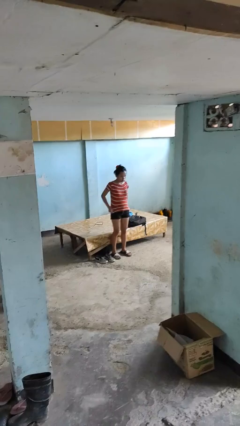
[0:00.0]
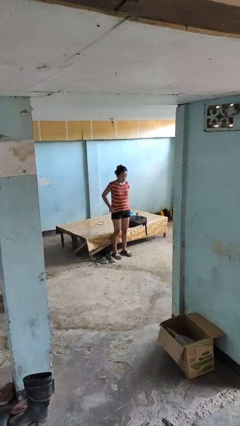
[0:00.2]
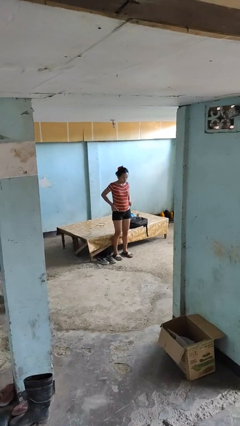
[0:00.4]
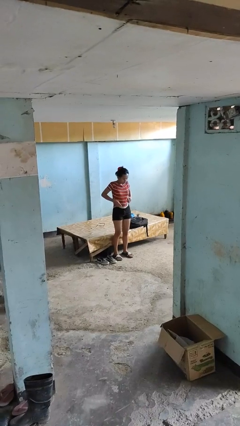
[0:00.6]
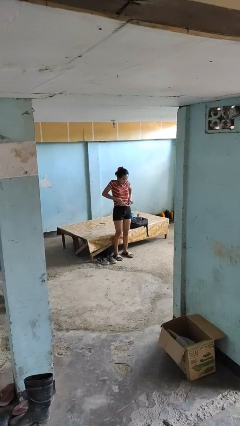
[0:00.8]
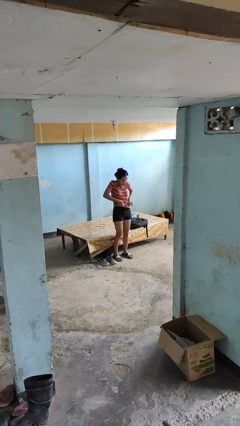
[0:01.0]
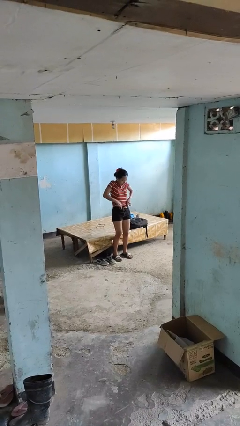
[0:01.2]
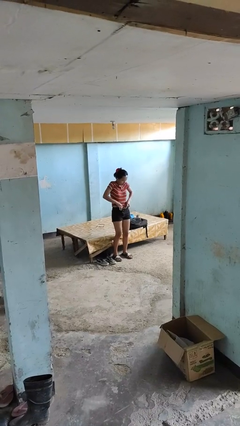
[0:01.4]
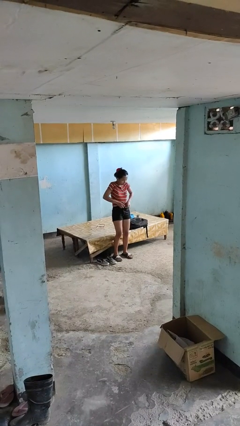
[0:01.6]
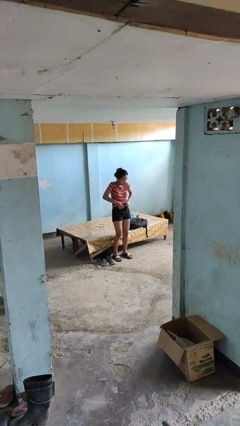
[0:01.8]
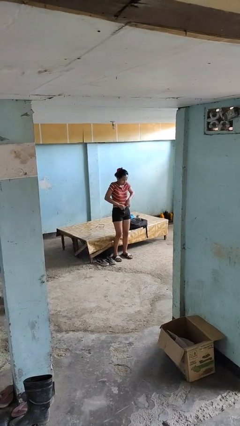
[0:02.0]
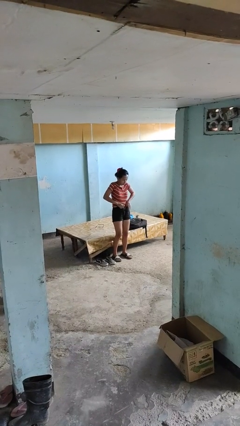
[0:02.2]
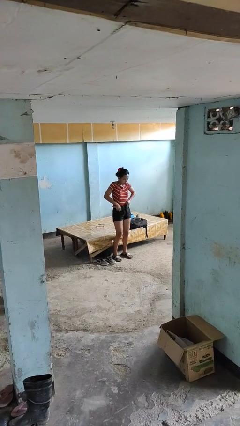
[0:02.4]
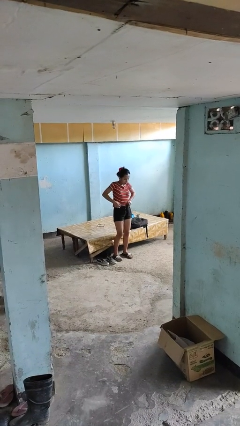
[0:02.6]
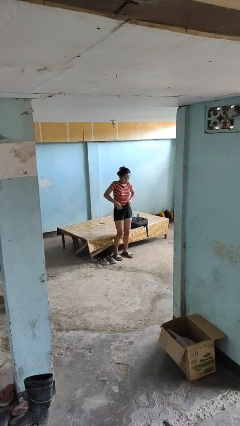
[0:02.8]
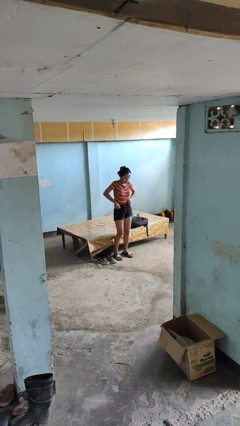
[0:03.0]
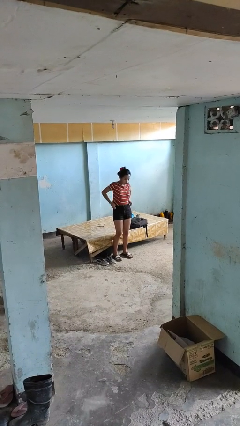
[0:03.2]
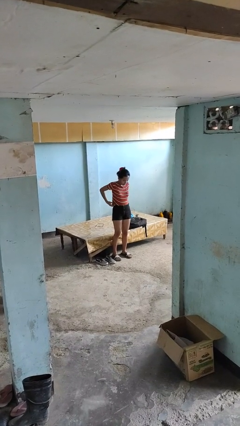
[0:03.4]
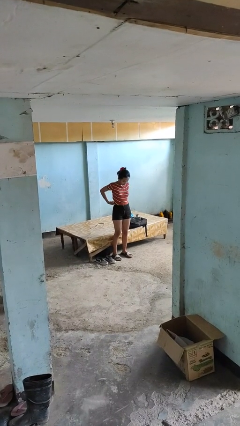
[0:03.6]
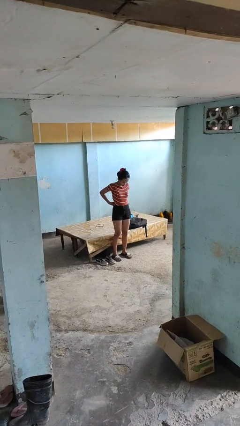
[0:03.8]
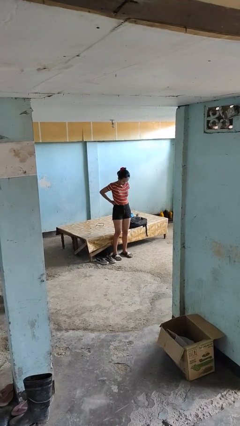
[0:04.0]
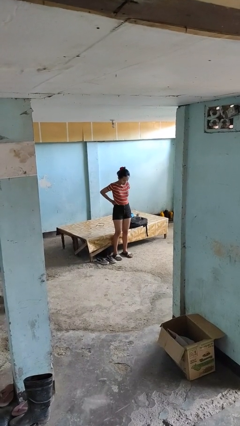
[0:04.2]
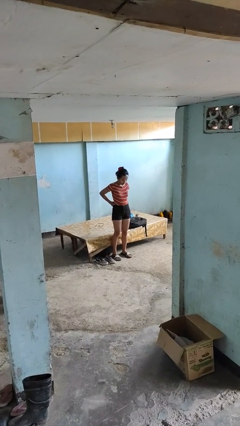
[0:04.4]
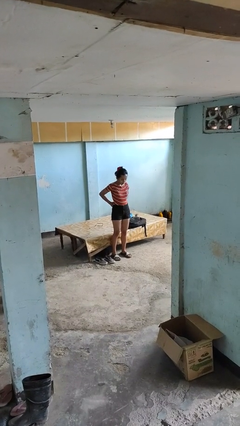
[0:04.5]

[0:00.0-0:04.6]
person tucks in shirt

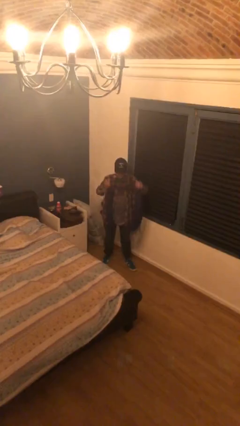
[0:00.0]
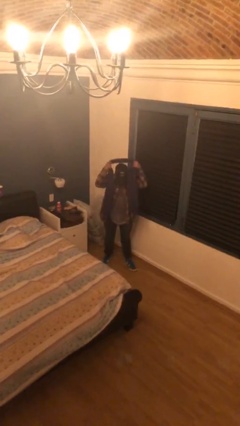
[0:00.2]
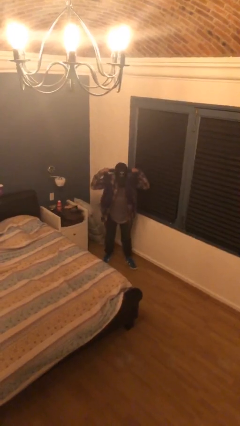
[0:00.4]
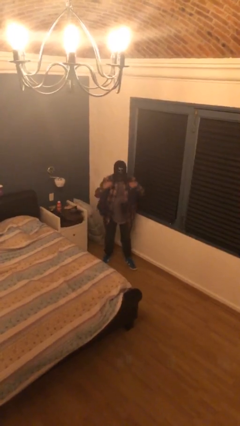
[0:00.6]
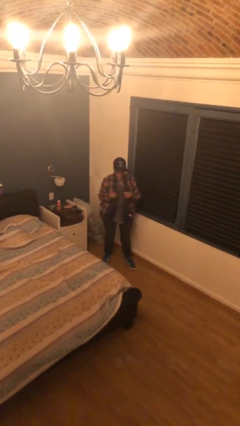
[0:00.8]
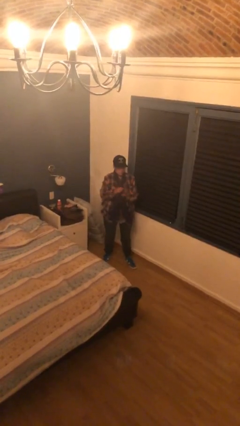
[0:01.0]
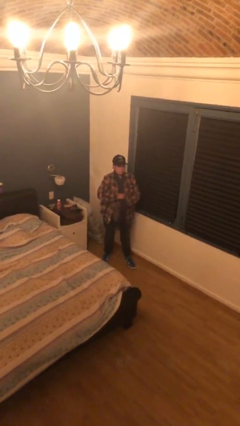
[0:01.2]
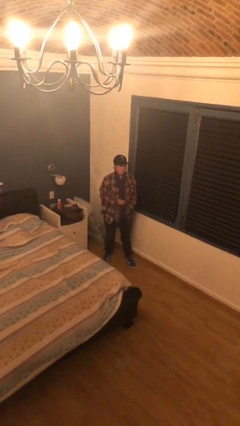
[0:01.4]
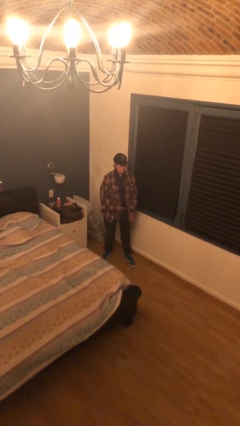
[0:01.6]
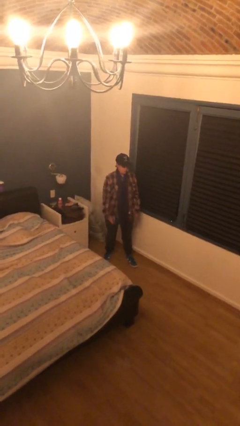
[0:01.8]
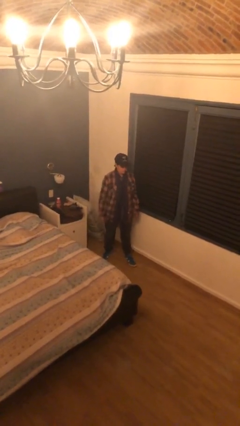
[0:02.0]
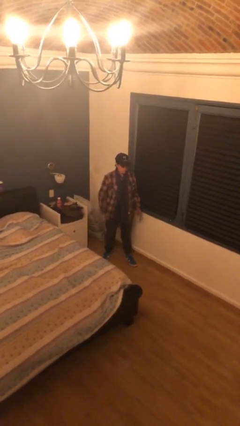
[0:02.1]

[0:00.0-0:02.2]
person puts on scarf

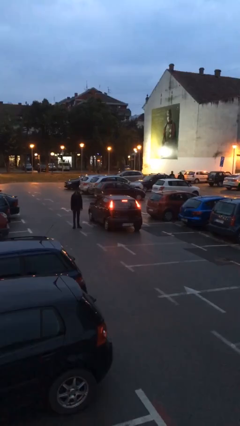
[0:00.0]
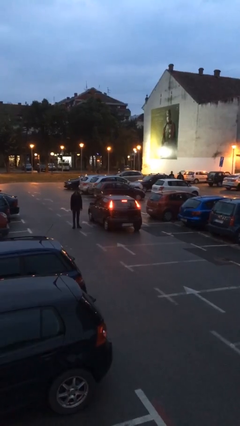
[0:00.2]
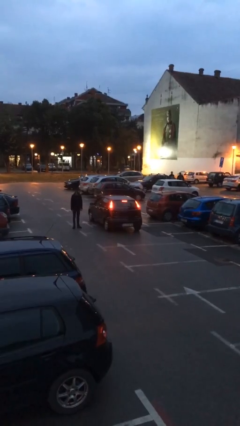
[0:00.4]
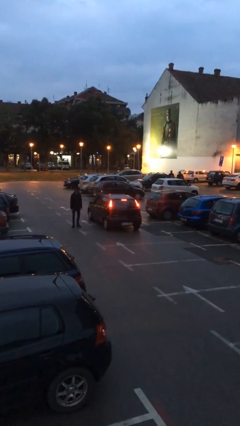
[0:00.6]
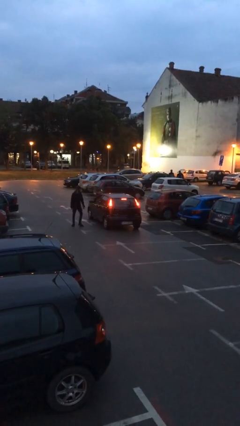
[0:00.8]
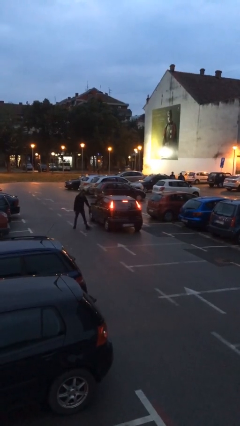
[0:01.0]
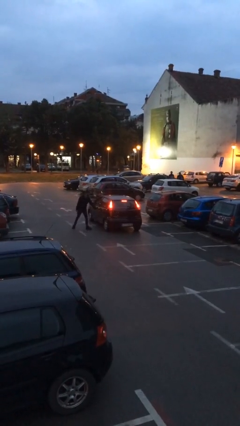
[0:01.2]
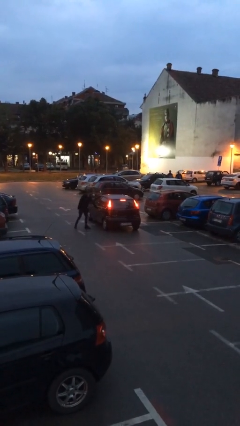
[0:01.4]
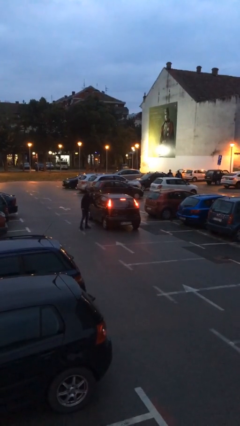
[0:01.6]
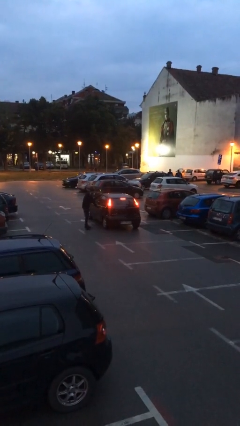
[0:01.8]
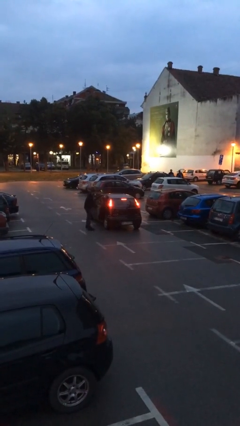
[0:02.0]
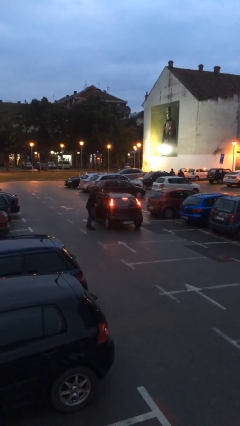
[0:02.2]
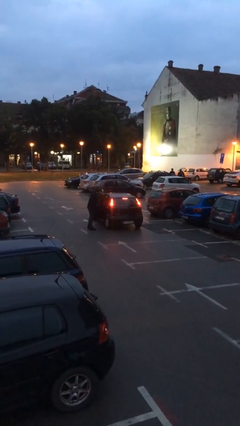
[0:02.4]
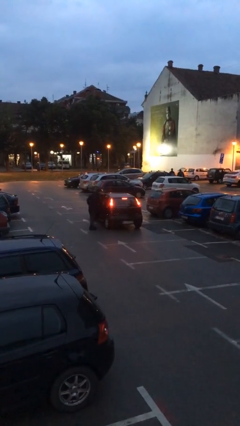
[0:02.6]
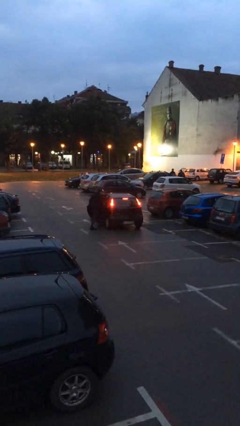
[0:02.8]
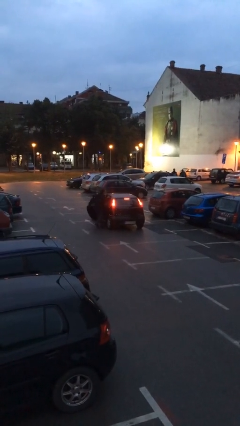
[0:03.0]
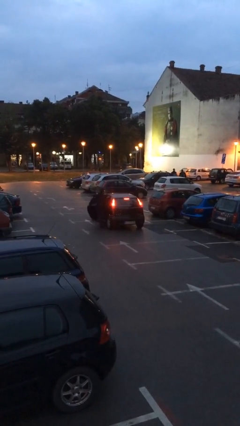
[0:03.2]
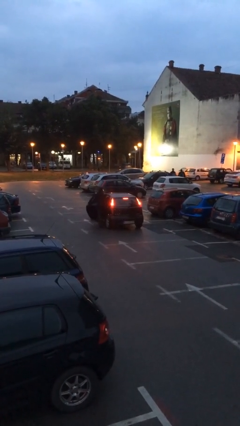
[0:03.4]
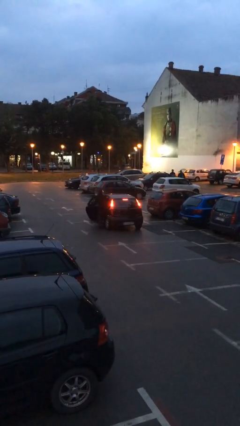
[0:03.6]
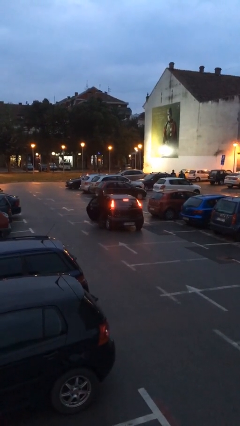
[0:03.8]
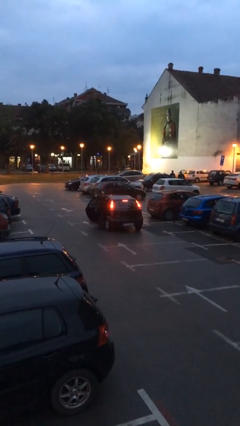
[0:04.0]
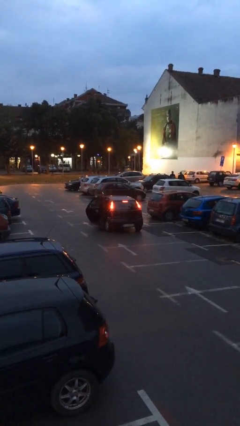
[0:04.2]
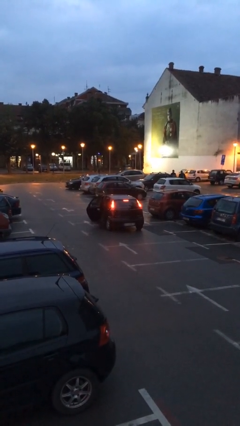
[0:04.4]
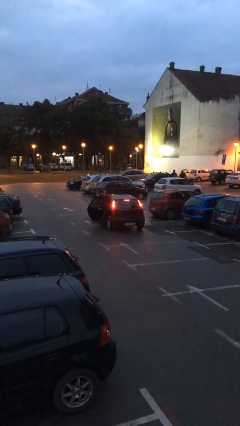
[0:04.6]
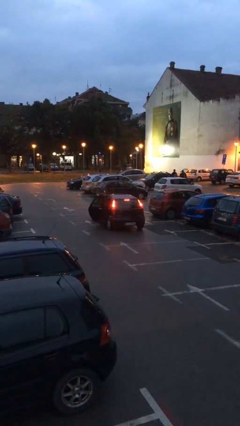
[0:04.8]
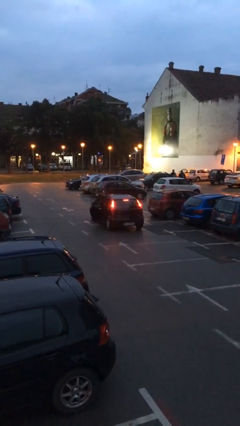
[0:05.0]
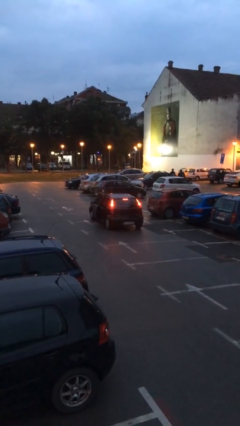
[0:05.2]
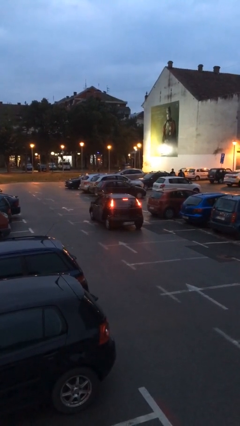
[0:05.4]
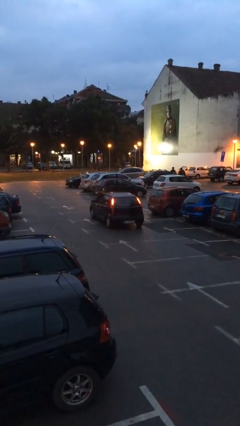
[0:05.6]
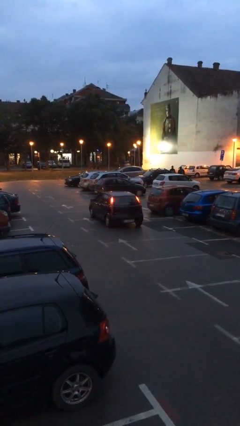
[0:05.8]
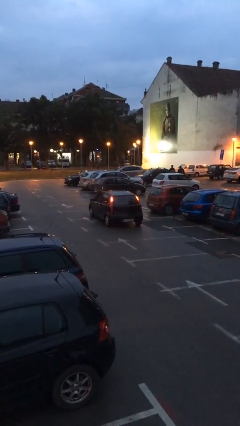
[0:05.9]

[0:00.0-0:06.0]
car picks up person

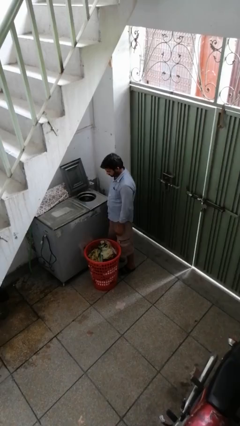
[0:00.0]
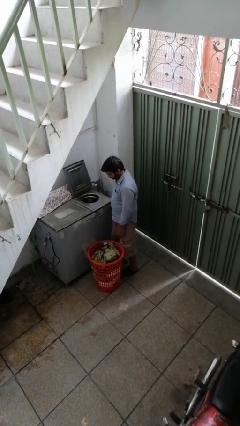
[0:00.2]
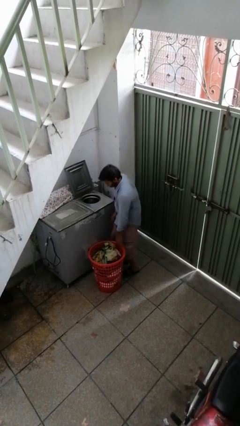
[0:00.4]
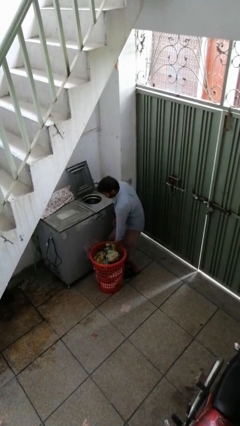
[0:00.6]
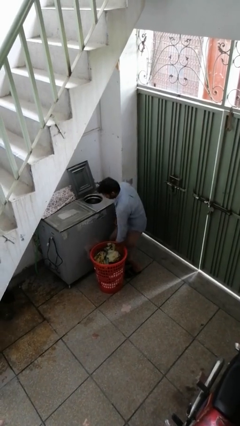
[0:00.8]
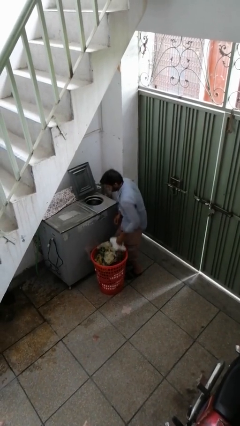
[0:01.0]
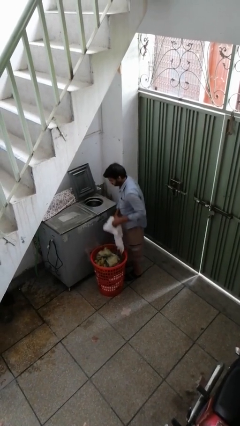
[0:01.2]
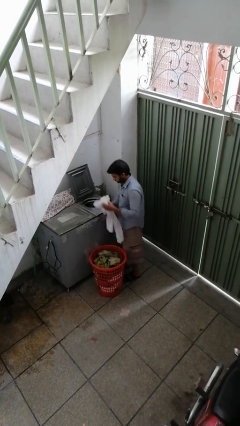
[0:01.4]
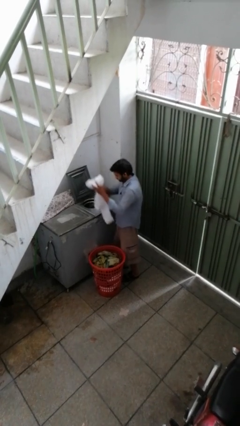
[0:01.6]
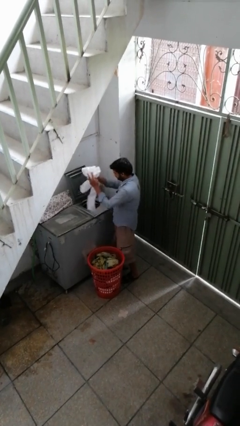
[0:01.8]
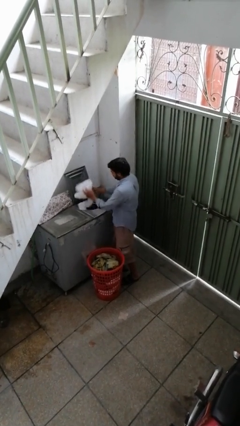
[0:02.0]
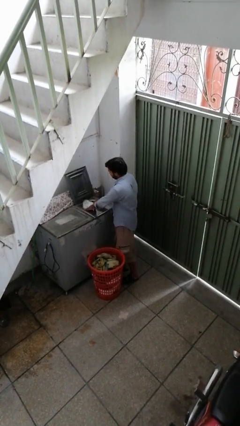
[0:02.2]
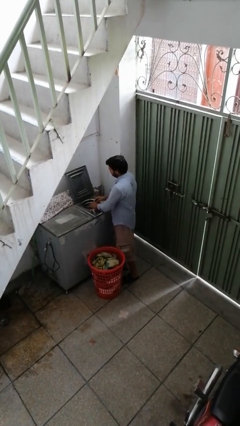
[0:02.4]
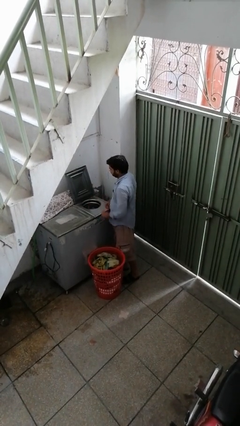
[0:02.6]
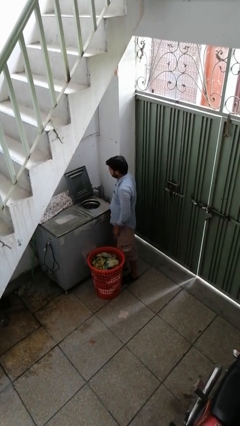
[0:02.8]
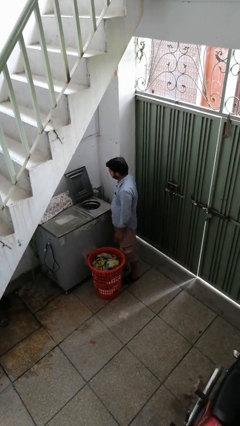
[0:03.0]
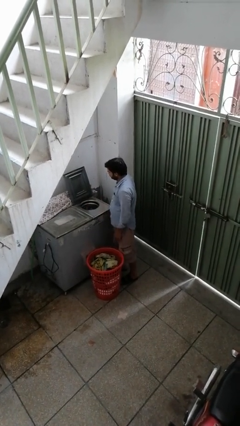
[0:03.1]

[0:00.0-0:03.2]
person loads dryer

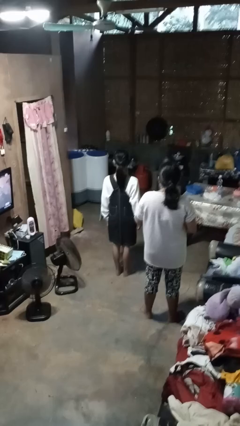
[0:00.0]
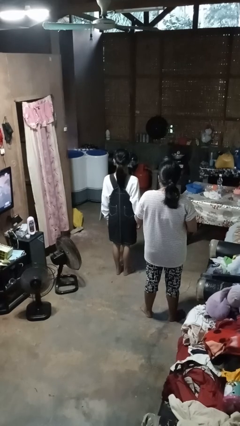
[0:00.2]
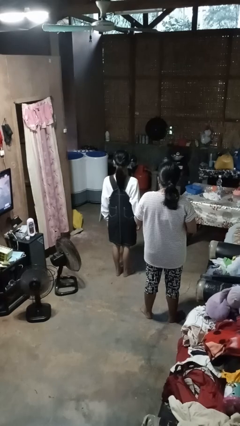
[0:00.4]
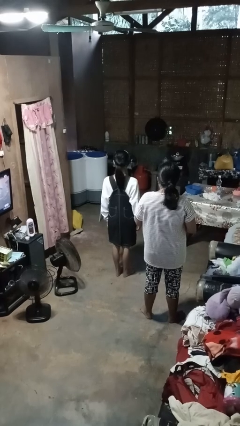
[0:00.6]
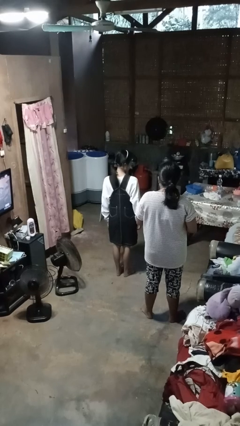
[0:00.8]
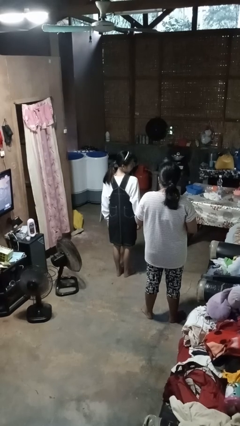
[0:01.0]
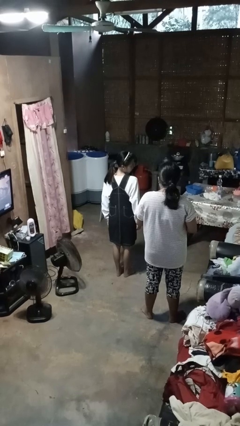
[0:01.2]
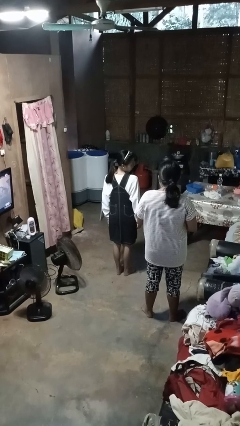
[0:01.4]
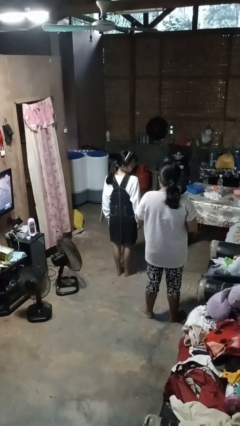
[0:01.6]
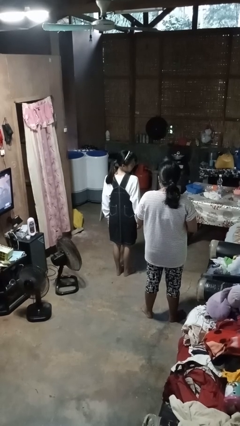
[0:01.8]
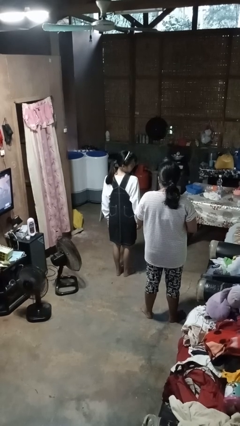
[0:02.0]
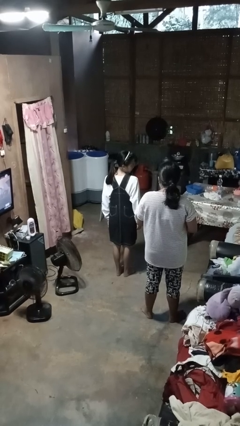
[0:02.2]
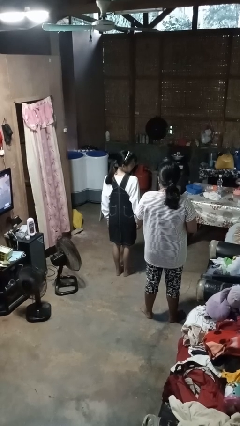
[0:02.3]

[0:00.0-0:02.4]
person looks over shoulder
